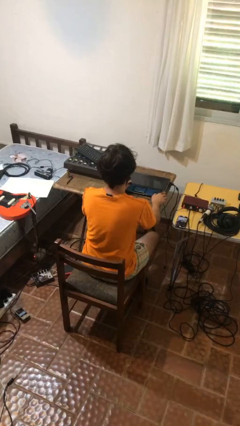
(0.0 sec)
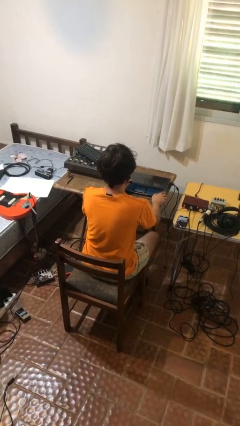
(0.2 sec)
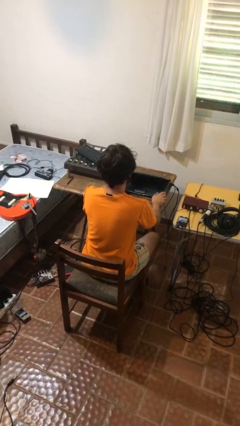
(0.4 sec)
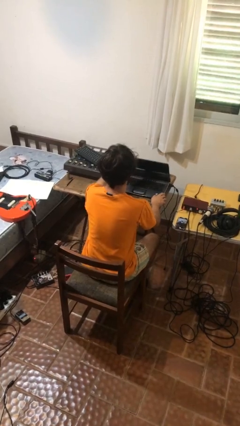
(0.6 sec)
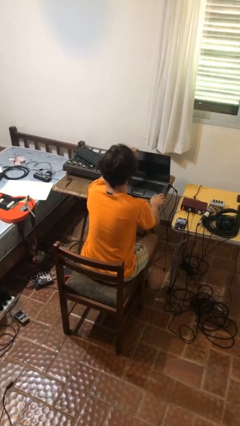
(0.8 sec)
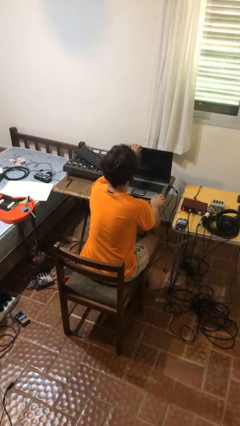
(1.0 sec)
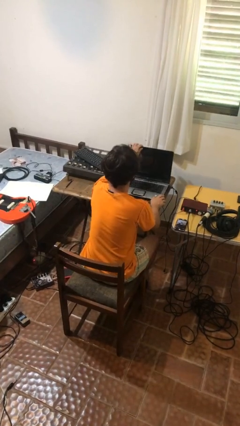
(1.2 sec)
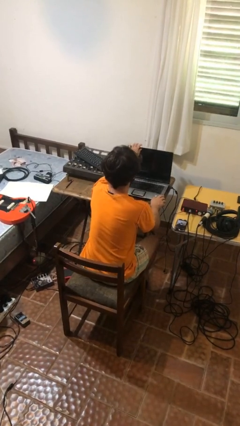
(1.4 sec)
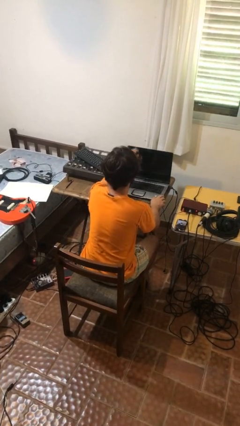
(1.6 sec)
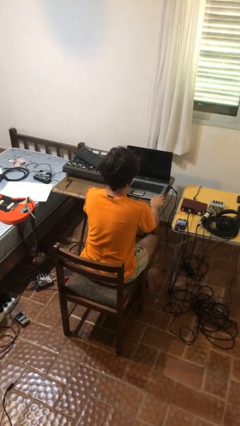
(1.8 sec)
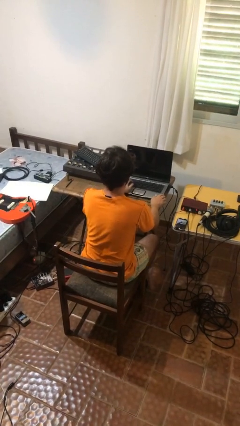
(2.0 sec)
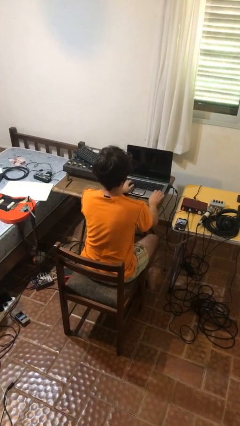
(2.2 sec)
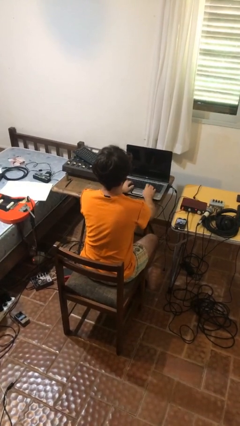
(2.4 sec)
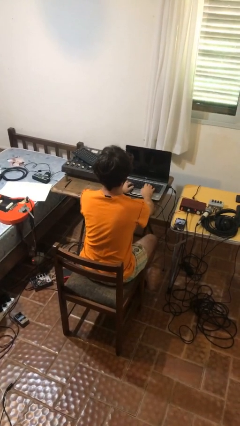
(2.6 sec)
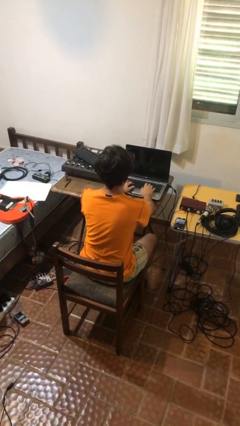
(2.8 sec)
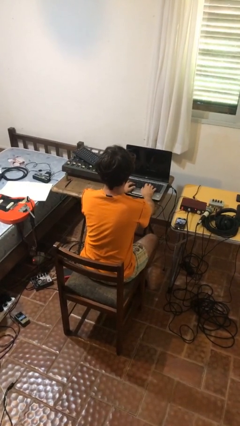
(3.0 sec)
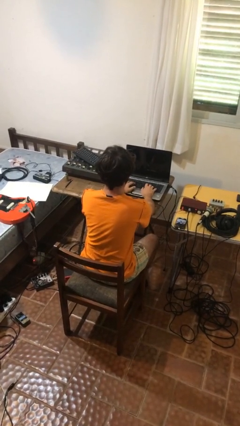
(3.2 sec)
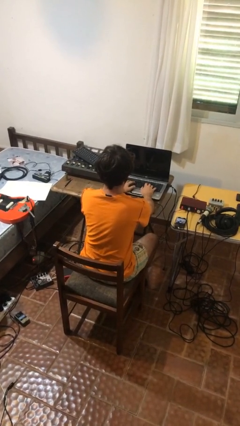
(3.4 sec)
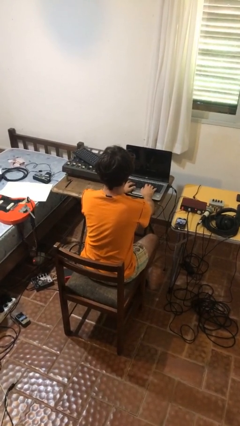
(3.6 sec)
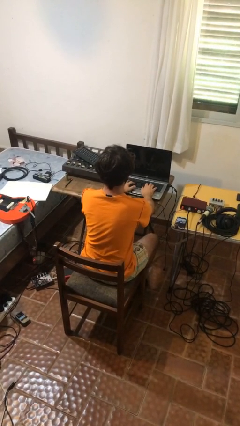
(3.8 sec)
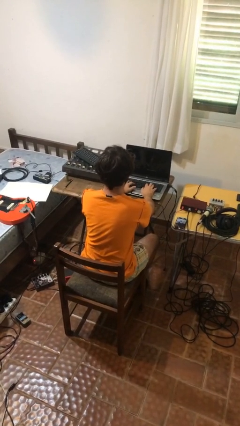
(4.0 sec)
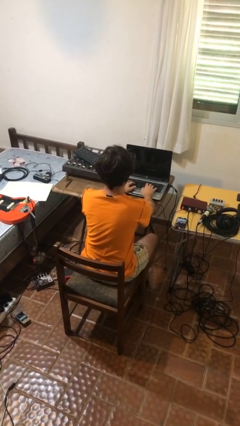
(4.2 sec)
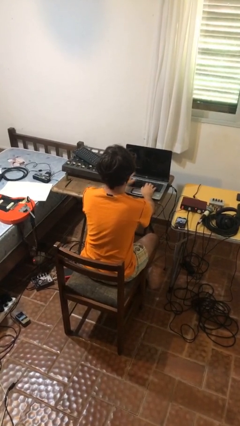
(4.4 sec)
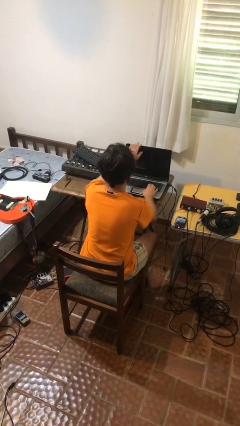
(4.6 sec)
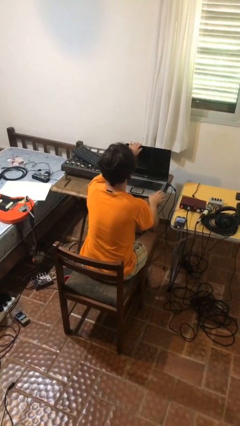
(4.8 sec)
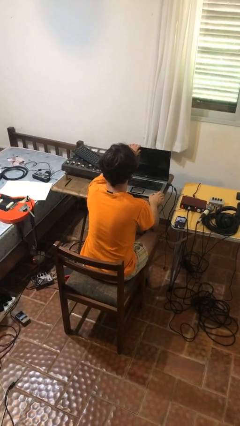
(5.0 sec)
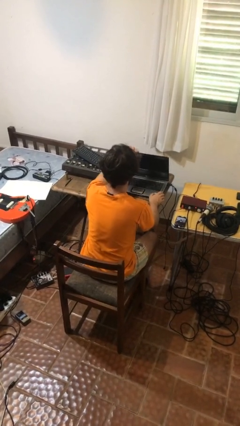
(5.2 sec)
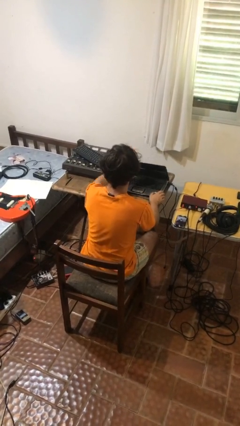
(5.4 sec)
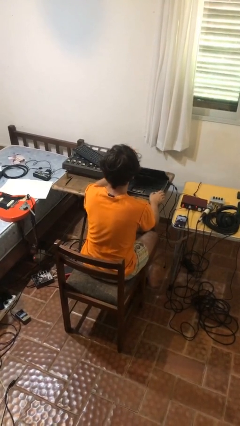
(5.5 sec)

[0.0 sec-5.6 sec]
person interacts with laptop

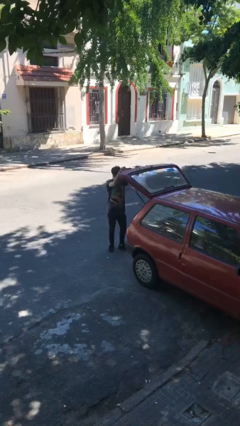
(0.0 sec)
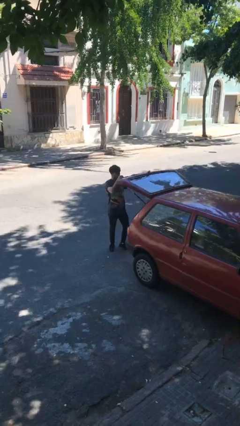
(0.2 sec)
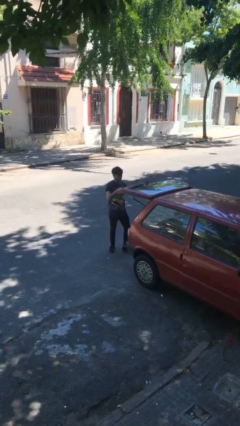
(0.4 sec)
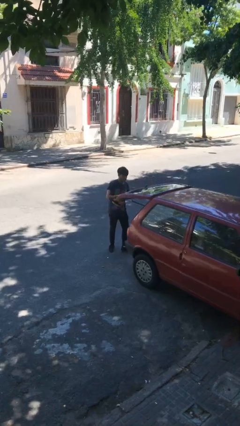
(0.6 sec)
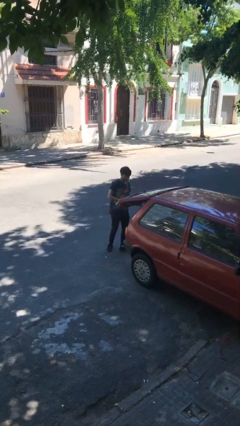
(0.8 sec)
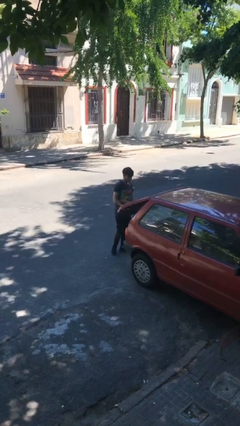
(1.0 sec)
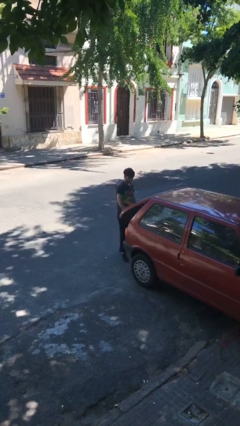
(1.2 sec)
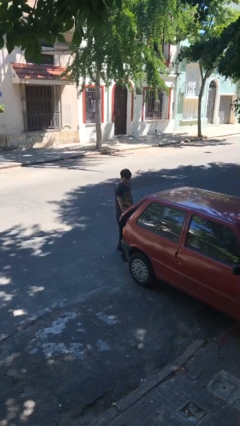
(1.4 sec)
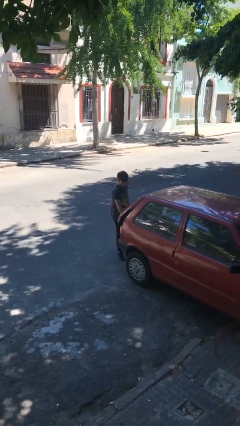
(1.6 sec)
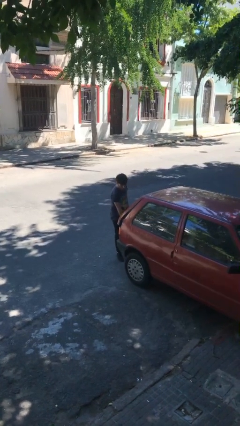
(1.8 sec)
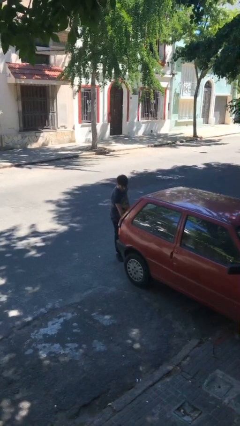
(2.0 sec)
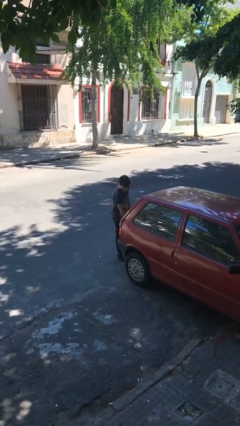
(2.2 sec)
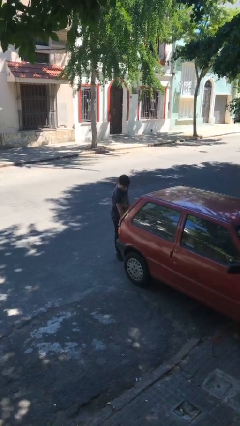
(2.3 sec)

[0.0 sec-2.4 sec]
person closes car trunk

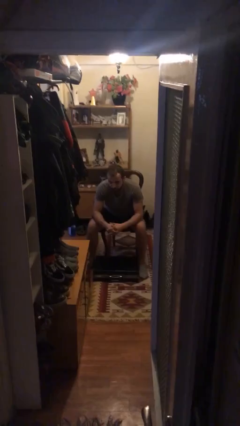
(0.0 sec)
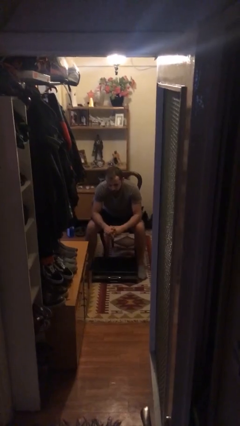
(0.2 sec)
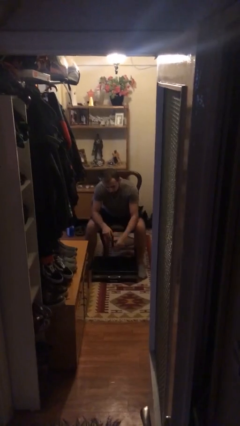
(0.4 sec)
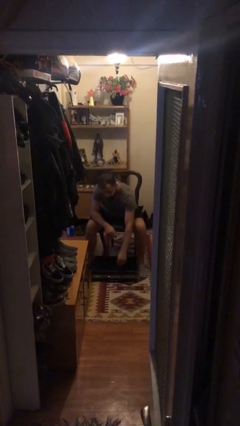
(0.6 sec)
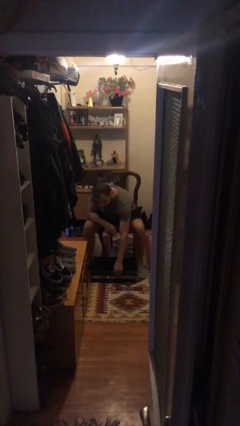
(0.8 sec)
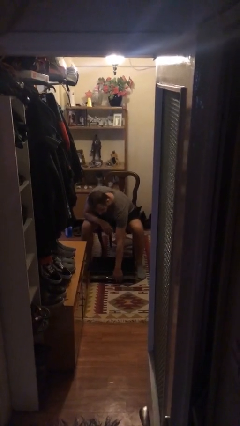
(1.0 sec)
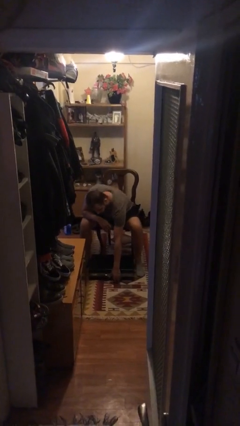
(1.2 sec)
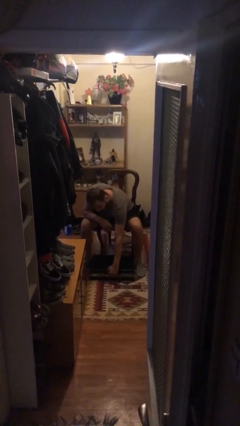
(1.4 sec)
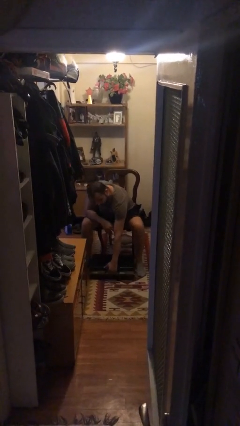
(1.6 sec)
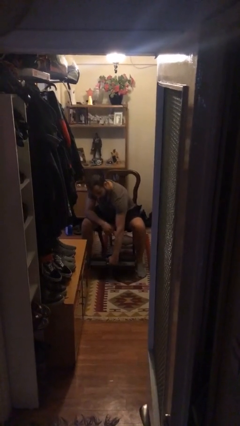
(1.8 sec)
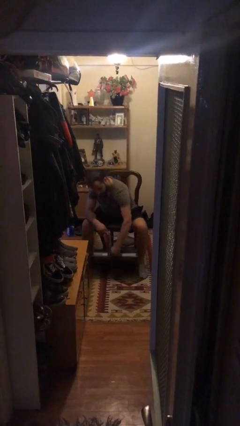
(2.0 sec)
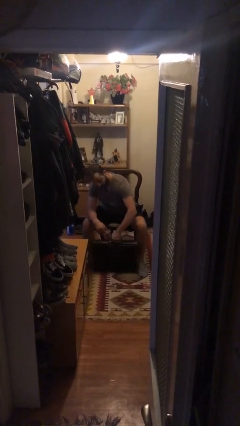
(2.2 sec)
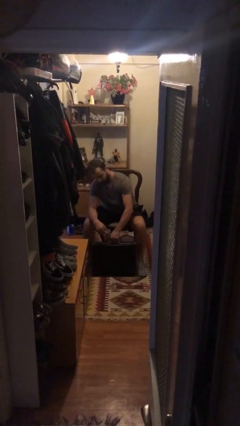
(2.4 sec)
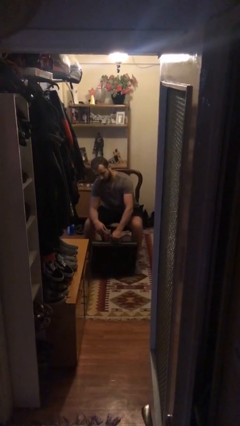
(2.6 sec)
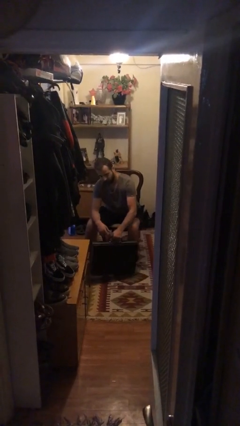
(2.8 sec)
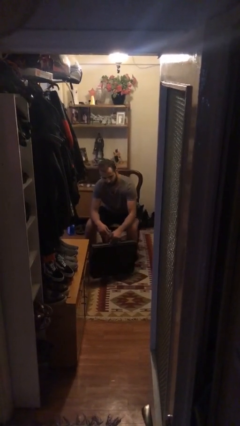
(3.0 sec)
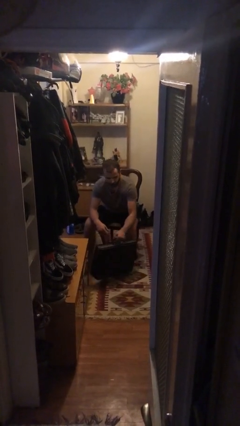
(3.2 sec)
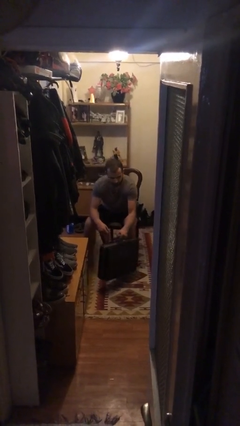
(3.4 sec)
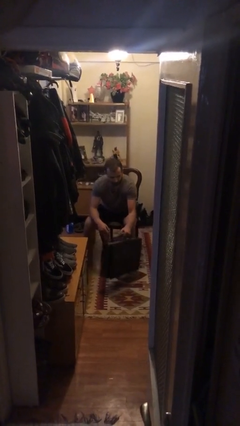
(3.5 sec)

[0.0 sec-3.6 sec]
person picks up object from floor

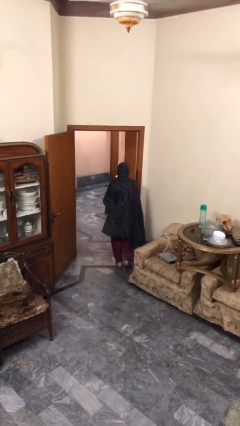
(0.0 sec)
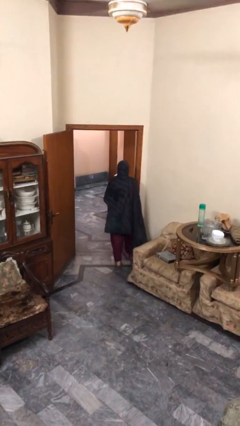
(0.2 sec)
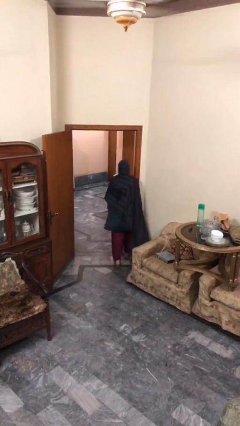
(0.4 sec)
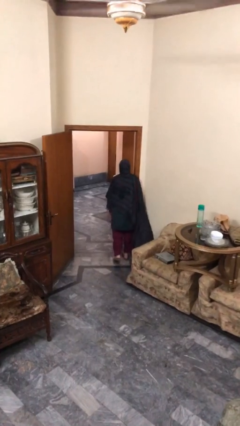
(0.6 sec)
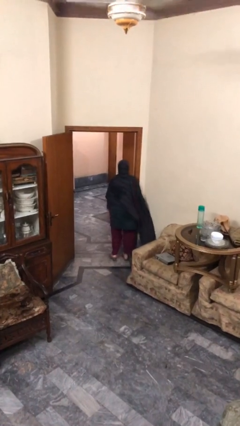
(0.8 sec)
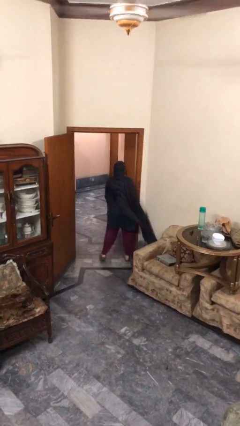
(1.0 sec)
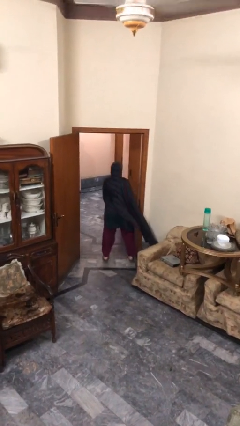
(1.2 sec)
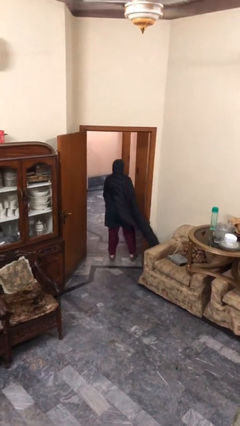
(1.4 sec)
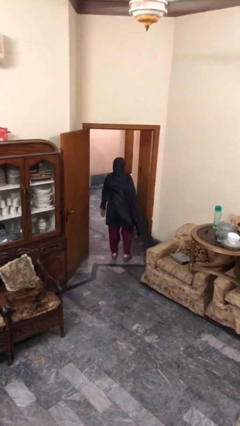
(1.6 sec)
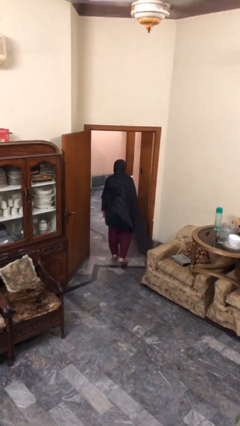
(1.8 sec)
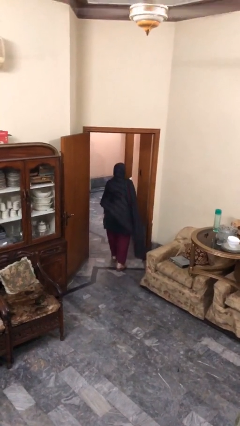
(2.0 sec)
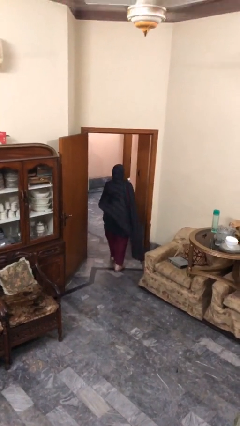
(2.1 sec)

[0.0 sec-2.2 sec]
person bumps into wall

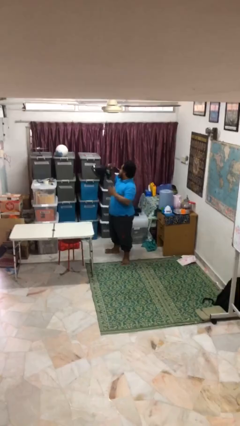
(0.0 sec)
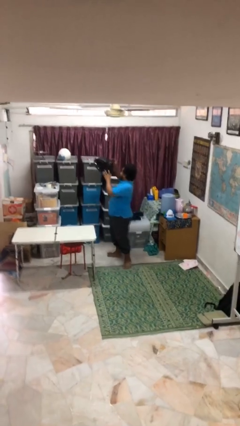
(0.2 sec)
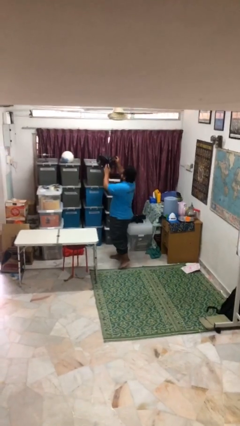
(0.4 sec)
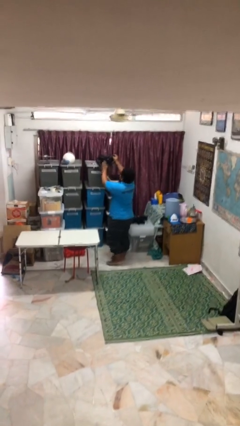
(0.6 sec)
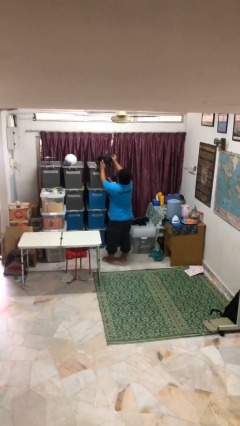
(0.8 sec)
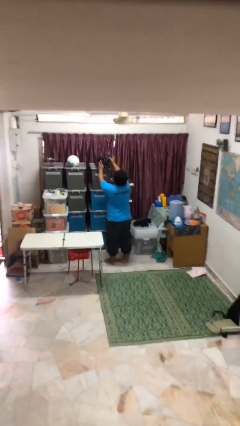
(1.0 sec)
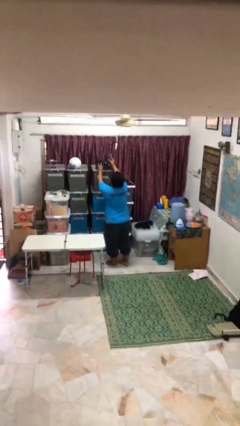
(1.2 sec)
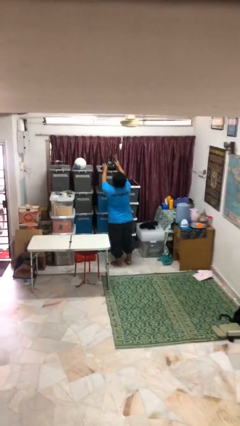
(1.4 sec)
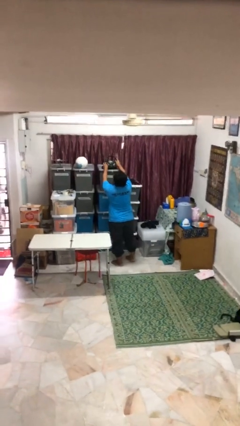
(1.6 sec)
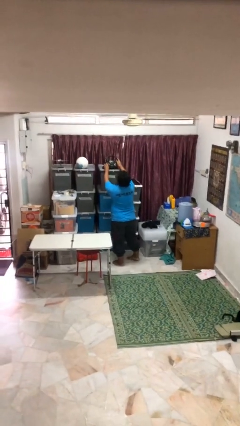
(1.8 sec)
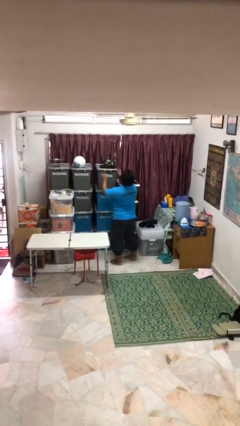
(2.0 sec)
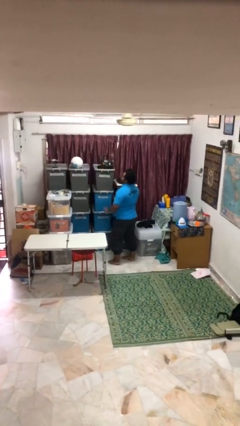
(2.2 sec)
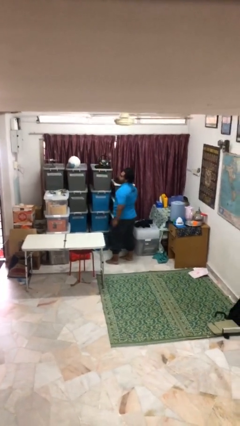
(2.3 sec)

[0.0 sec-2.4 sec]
person puts down object on shelf

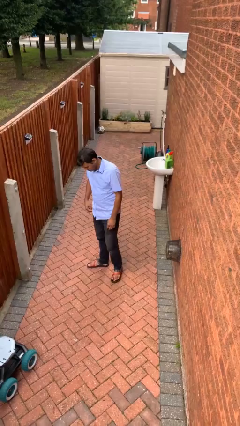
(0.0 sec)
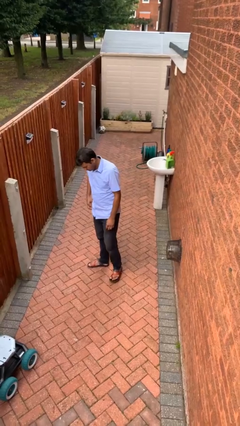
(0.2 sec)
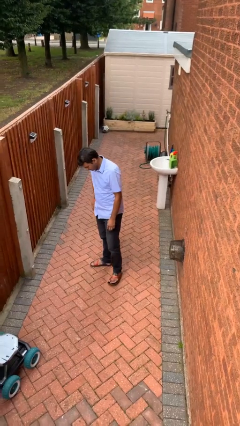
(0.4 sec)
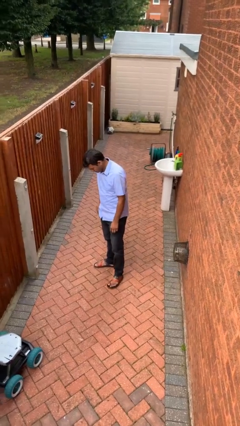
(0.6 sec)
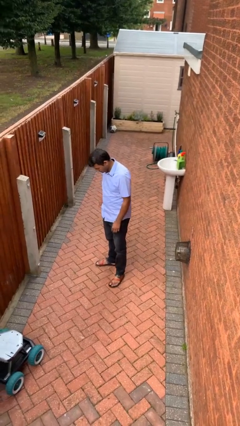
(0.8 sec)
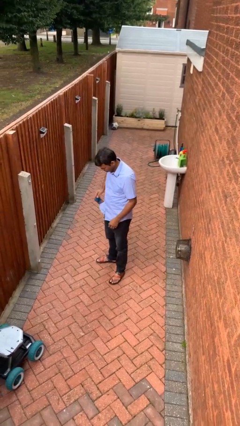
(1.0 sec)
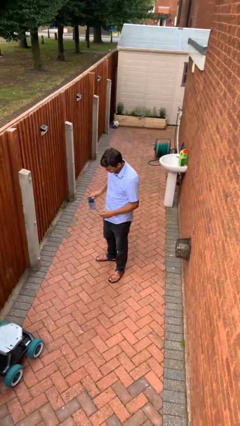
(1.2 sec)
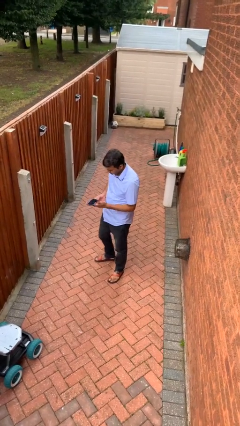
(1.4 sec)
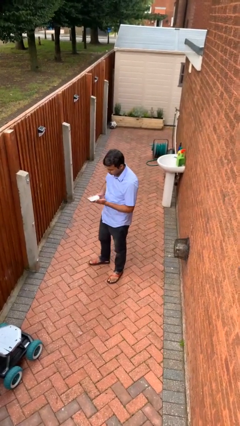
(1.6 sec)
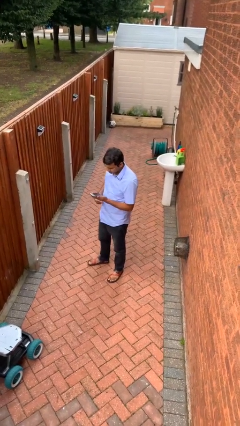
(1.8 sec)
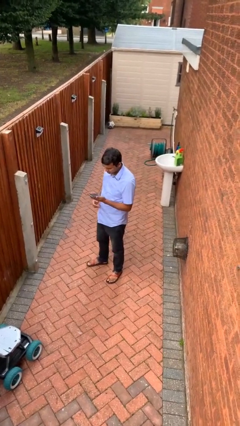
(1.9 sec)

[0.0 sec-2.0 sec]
person takes phone from pocket
